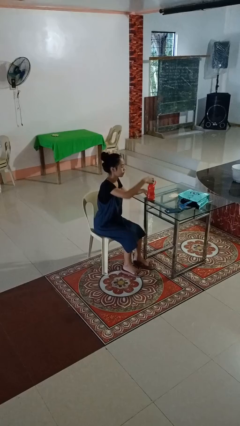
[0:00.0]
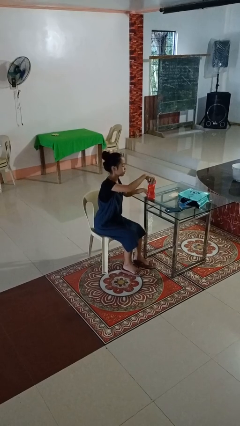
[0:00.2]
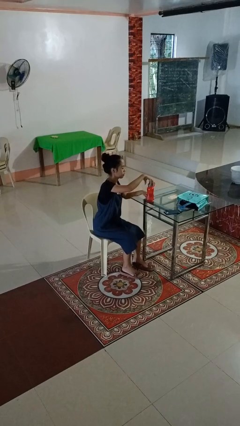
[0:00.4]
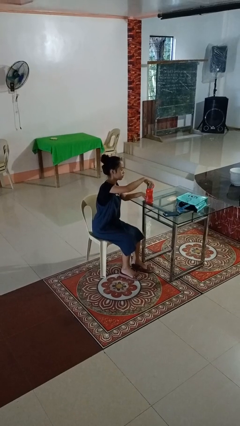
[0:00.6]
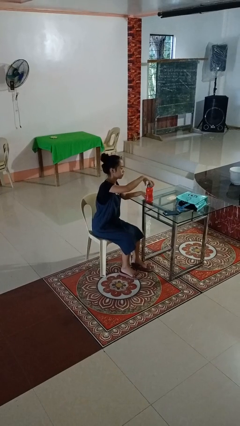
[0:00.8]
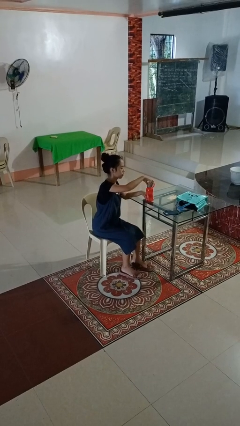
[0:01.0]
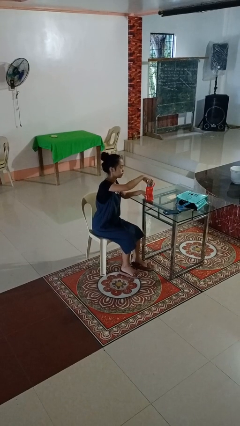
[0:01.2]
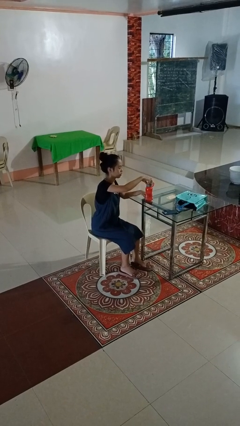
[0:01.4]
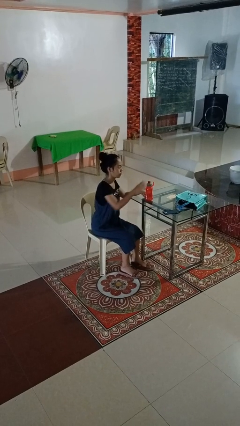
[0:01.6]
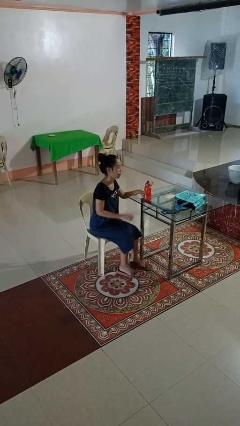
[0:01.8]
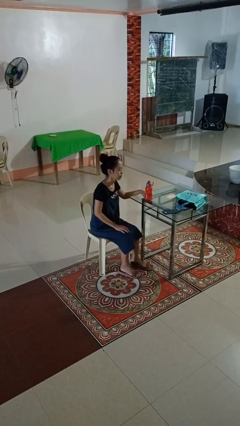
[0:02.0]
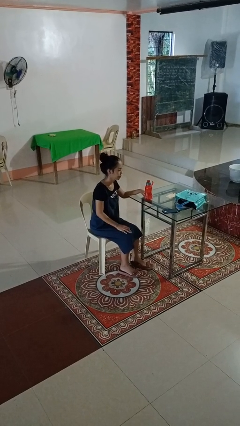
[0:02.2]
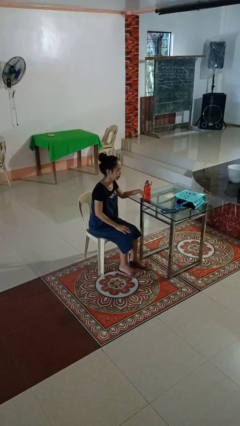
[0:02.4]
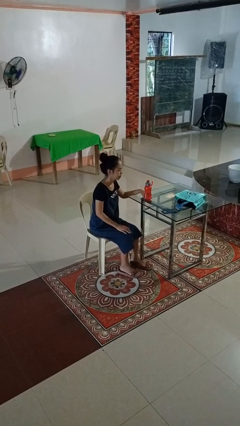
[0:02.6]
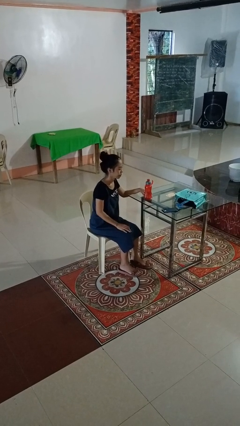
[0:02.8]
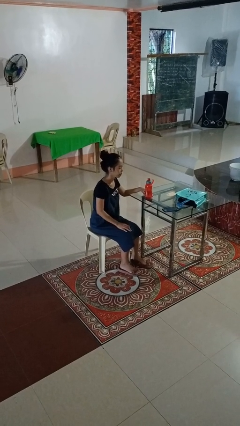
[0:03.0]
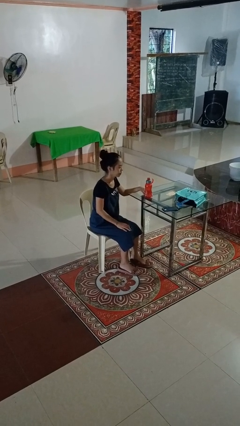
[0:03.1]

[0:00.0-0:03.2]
person screws lid to bottle

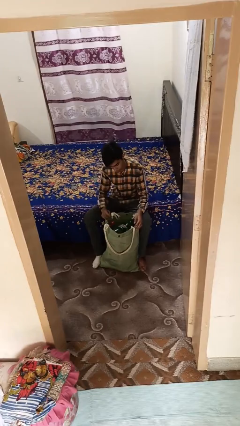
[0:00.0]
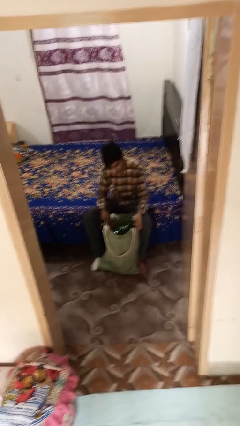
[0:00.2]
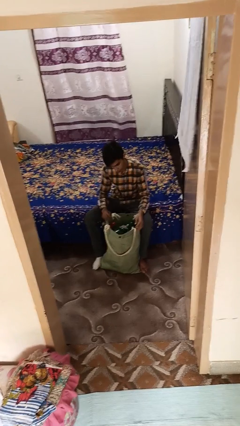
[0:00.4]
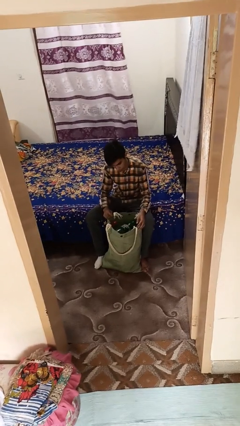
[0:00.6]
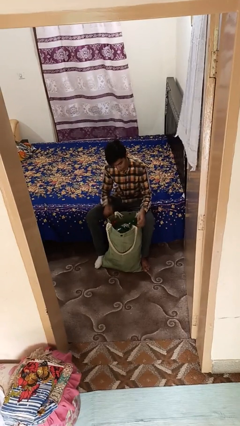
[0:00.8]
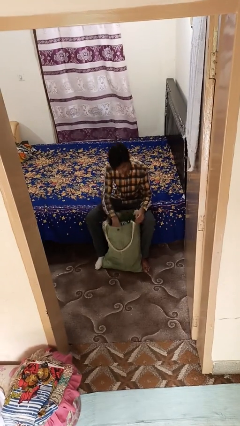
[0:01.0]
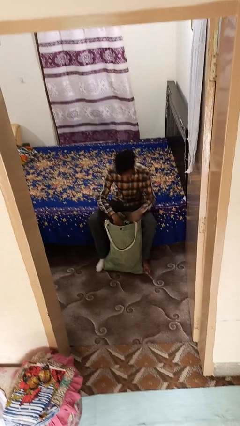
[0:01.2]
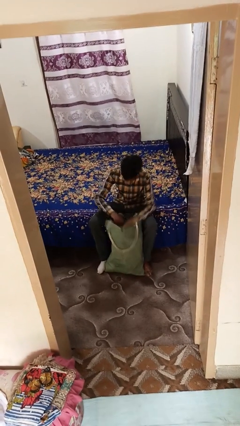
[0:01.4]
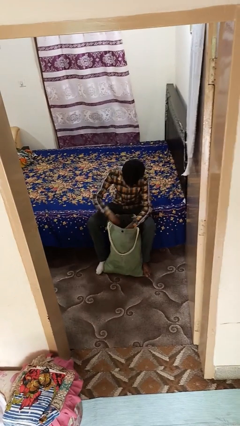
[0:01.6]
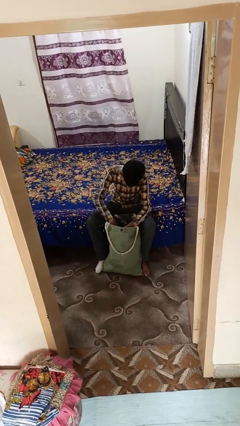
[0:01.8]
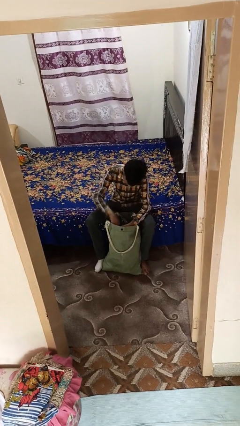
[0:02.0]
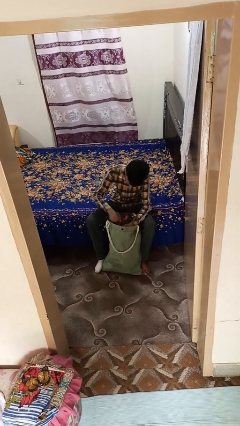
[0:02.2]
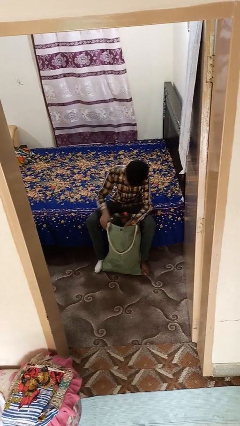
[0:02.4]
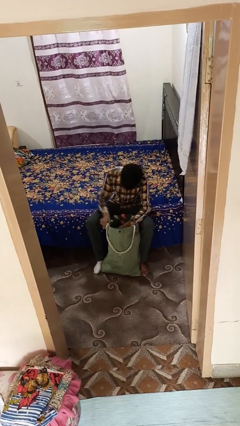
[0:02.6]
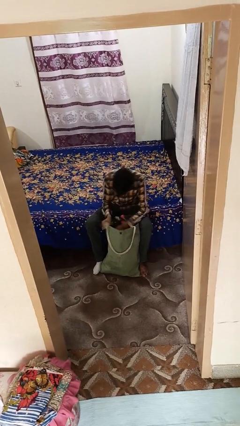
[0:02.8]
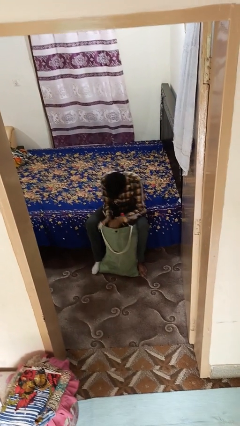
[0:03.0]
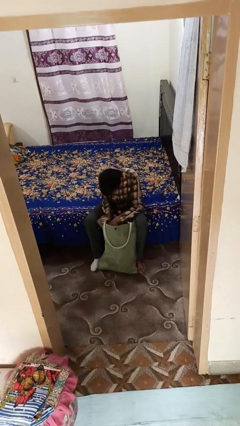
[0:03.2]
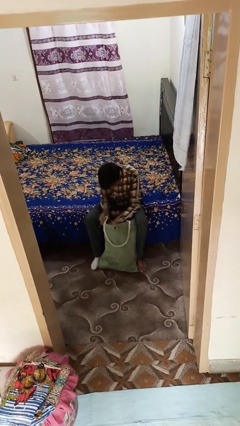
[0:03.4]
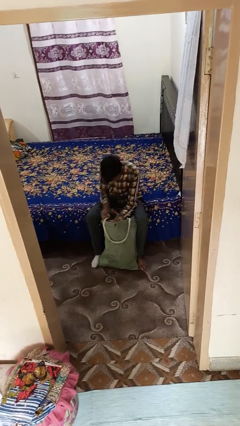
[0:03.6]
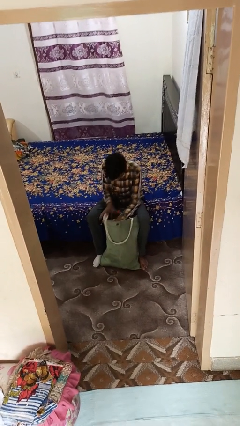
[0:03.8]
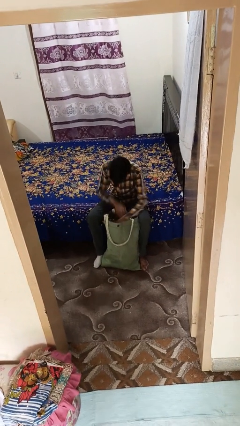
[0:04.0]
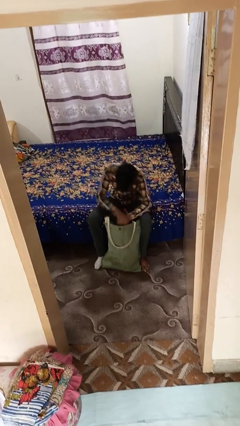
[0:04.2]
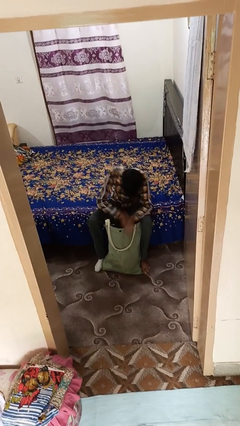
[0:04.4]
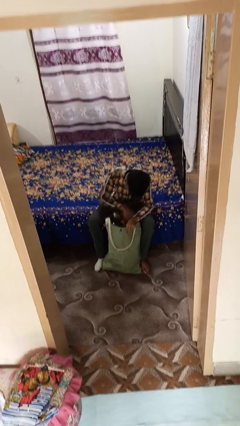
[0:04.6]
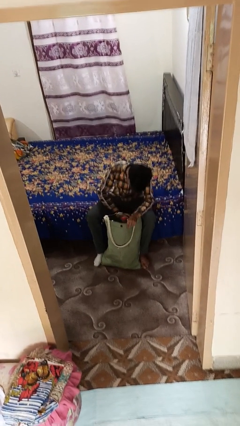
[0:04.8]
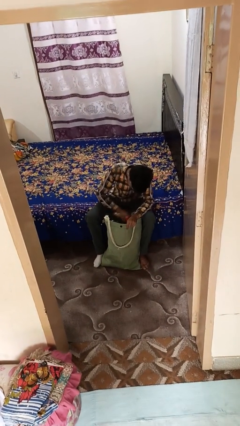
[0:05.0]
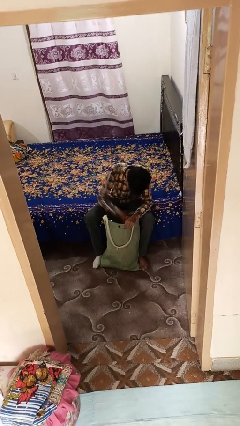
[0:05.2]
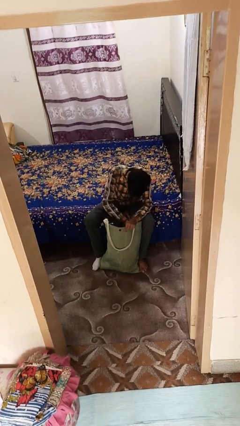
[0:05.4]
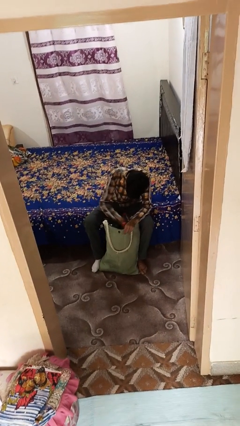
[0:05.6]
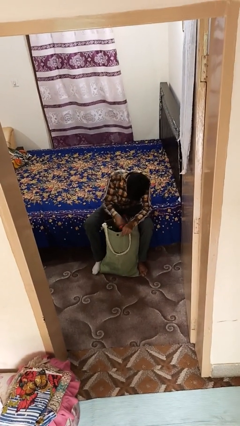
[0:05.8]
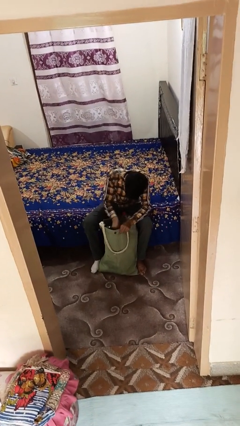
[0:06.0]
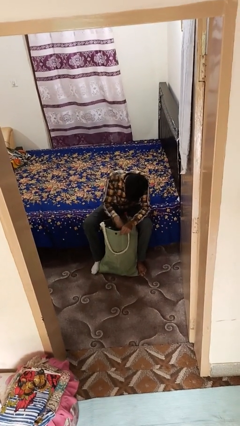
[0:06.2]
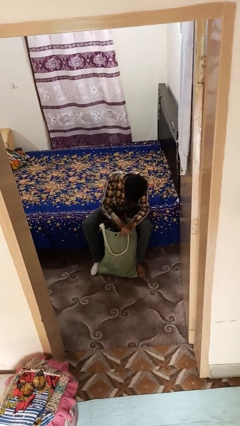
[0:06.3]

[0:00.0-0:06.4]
person searches in bag

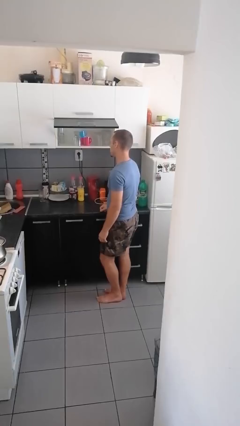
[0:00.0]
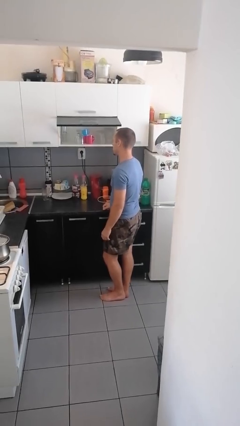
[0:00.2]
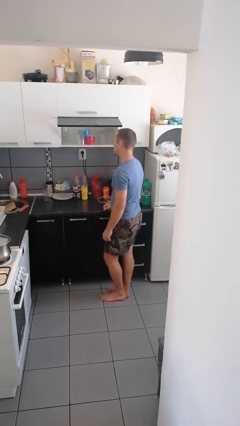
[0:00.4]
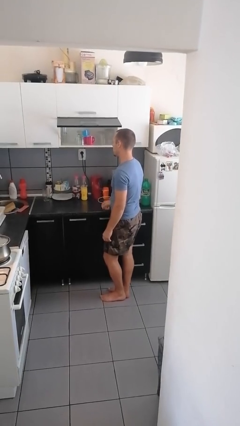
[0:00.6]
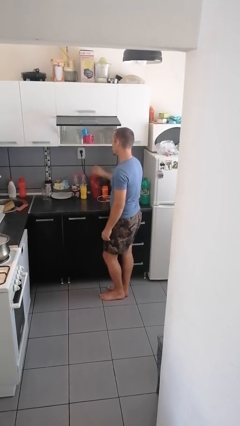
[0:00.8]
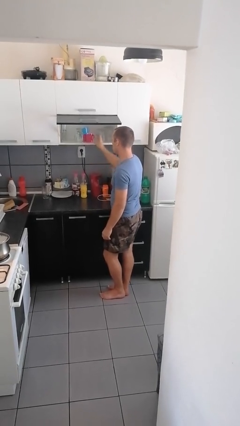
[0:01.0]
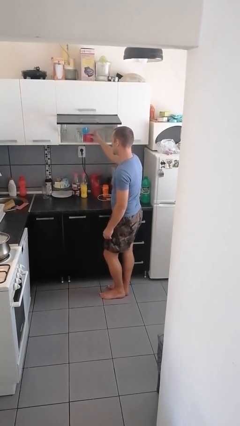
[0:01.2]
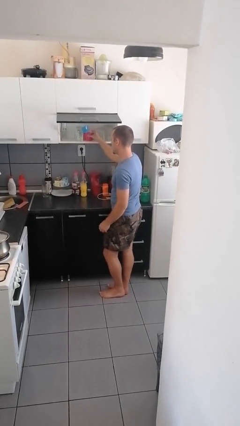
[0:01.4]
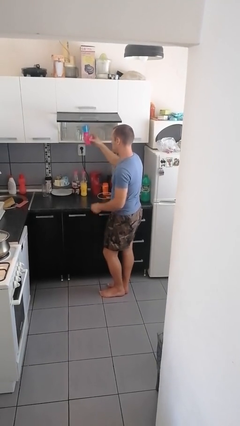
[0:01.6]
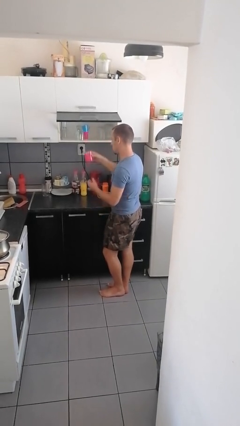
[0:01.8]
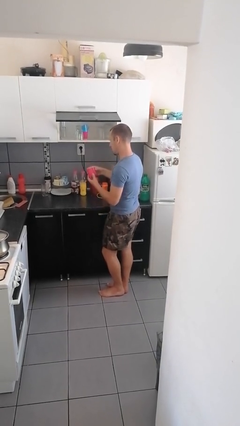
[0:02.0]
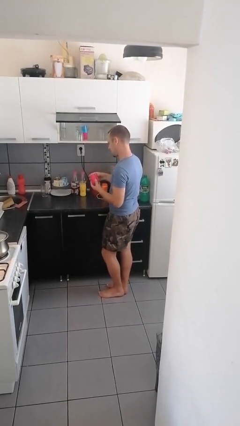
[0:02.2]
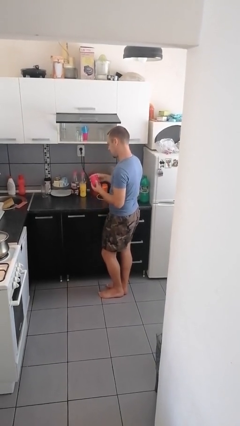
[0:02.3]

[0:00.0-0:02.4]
person picks up object from cabinet

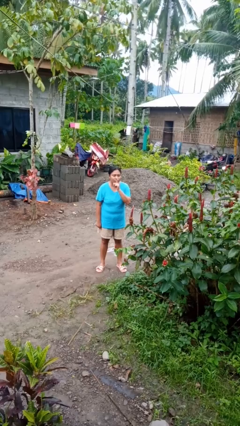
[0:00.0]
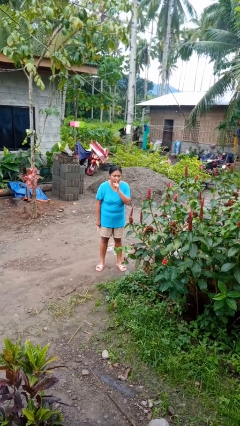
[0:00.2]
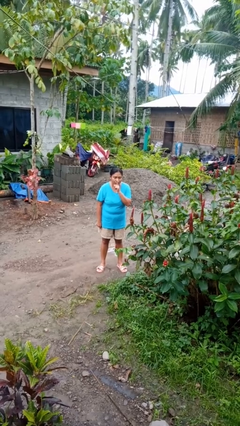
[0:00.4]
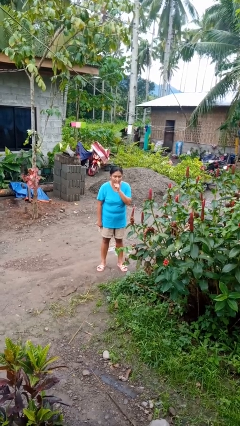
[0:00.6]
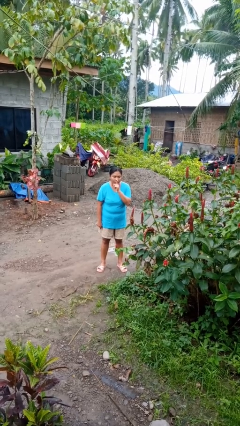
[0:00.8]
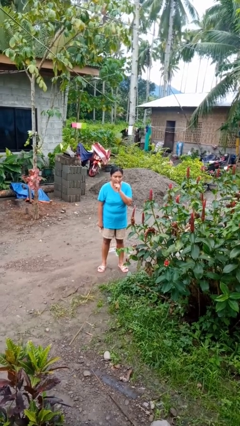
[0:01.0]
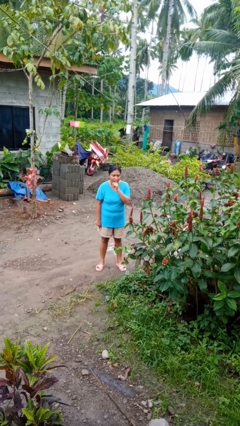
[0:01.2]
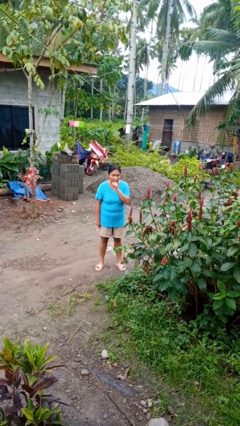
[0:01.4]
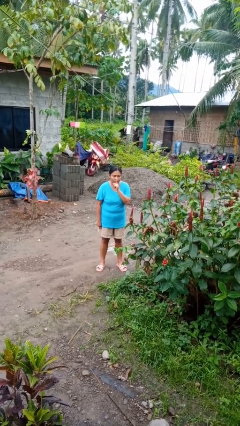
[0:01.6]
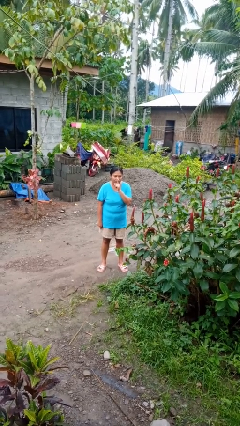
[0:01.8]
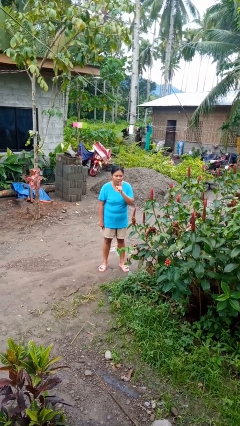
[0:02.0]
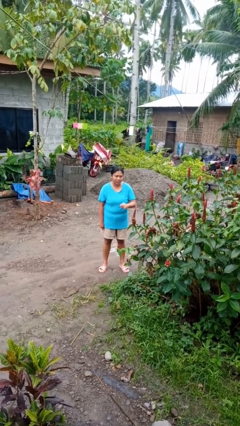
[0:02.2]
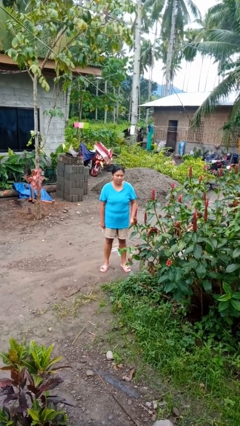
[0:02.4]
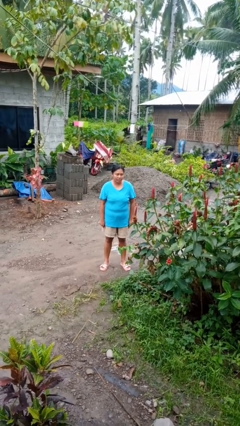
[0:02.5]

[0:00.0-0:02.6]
person gestures be quiet

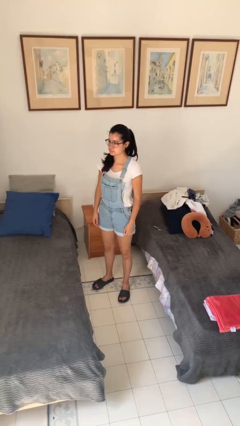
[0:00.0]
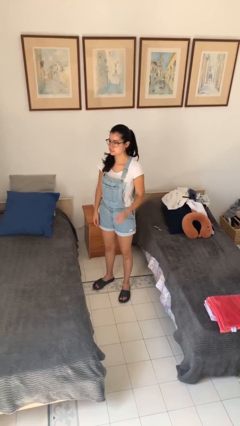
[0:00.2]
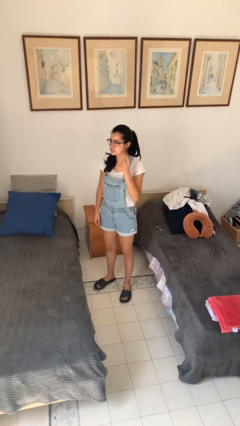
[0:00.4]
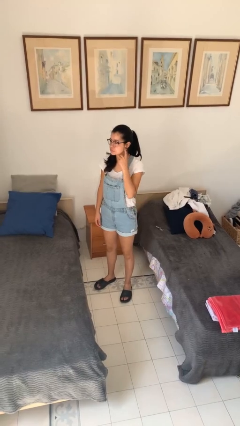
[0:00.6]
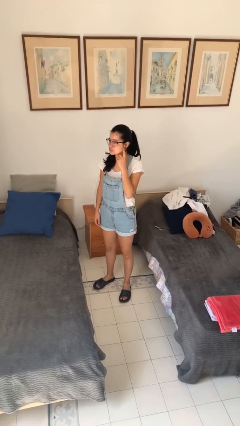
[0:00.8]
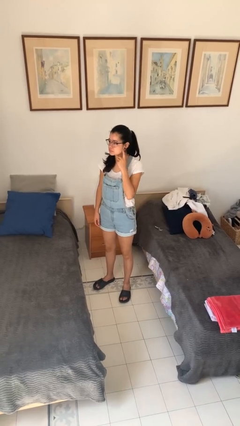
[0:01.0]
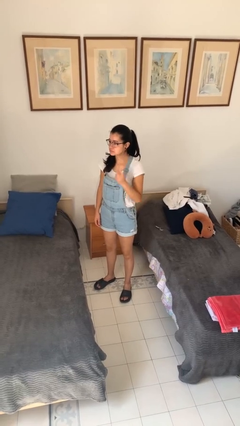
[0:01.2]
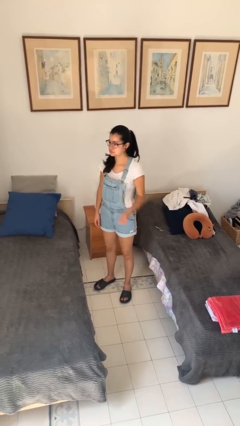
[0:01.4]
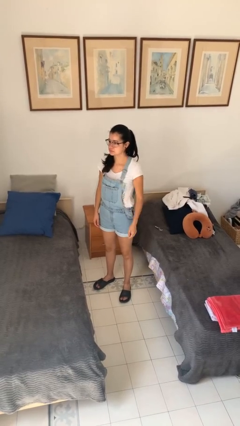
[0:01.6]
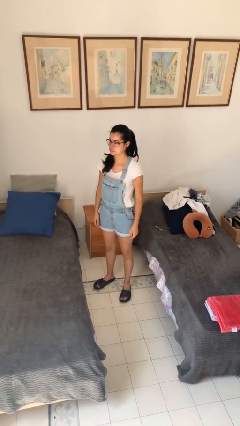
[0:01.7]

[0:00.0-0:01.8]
person gestures heart

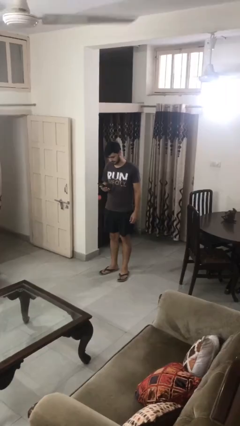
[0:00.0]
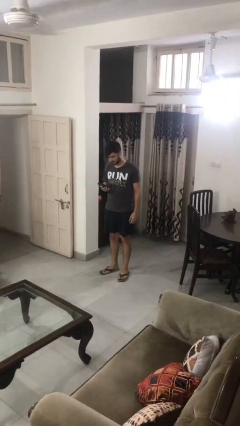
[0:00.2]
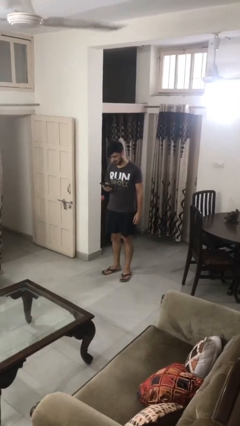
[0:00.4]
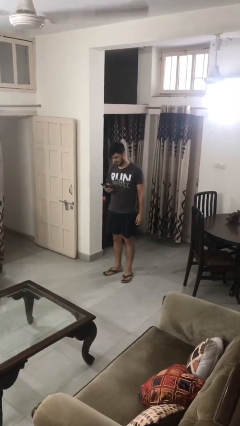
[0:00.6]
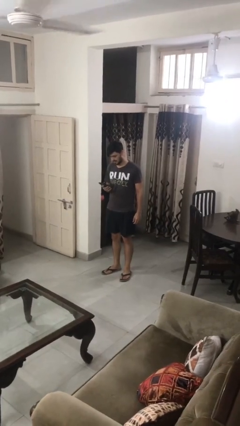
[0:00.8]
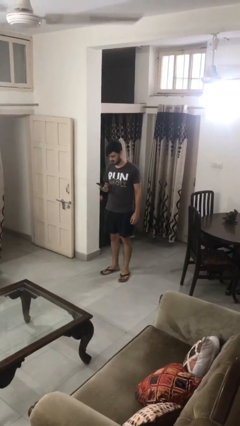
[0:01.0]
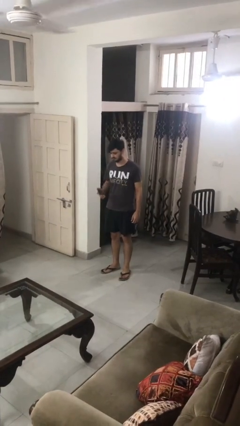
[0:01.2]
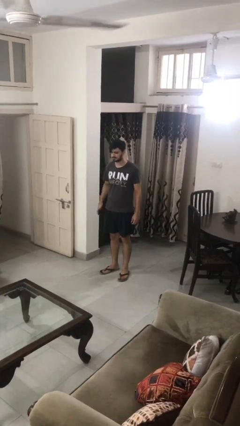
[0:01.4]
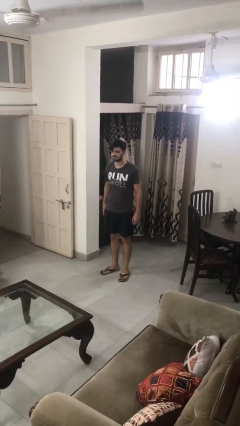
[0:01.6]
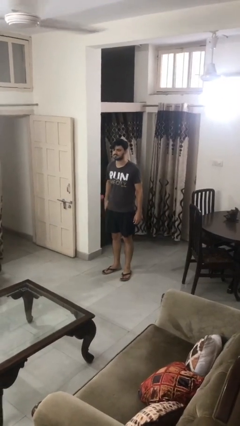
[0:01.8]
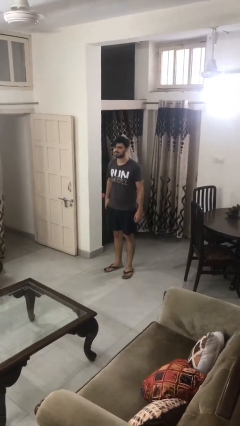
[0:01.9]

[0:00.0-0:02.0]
person puts phone into pocket
